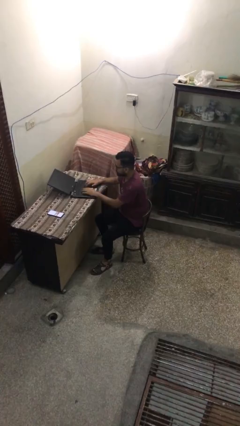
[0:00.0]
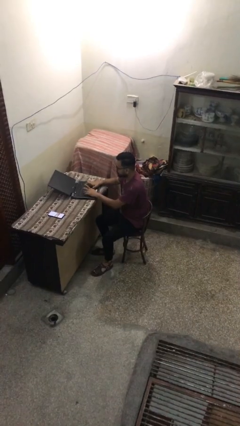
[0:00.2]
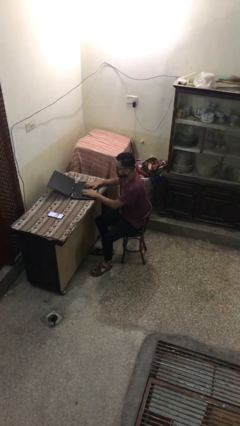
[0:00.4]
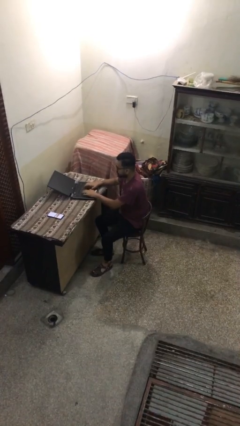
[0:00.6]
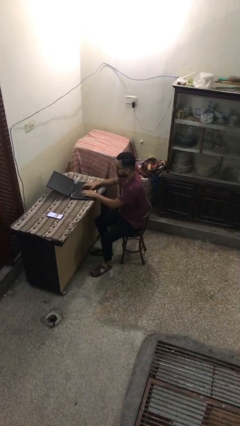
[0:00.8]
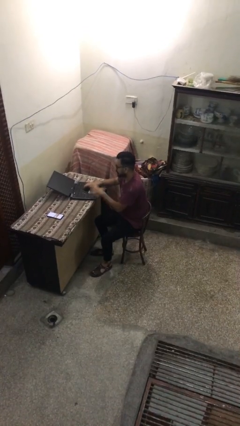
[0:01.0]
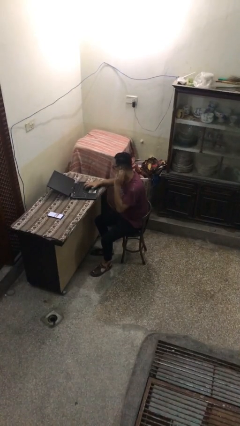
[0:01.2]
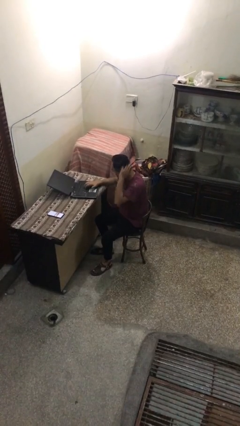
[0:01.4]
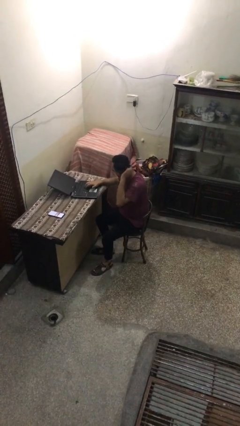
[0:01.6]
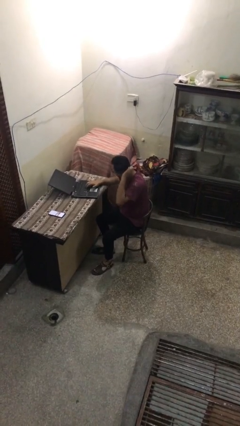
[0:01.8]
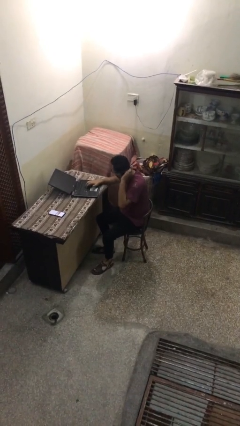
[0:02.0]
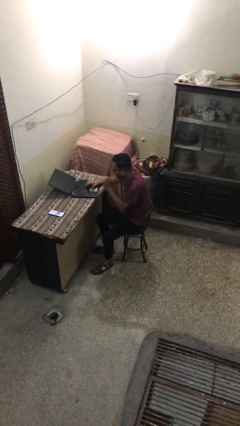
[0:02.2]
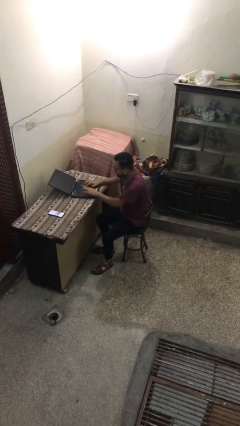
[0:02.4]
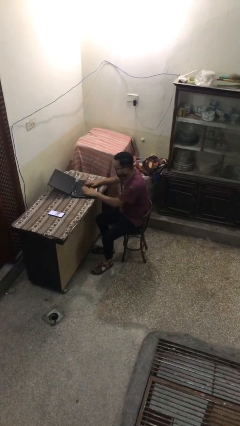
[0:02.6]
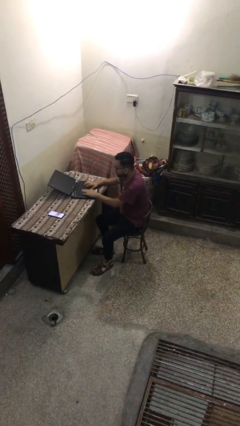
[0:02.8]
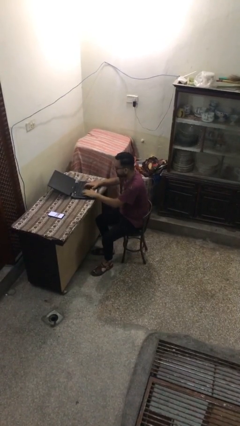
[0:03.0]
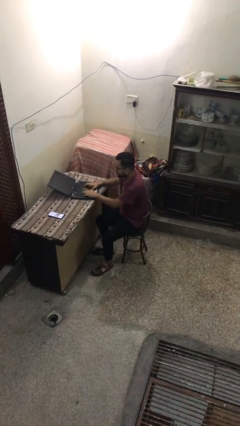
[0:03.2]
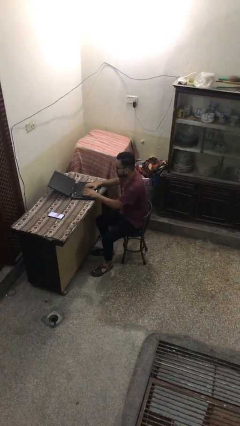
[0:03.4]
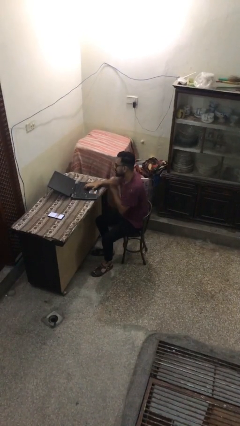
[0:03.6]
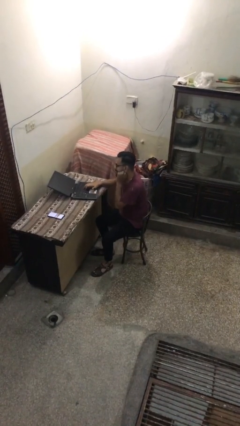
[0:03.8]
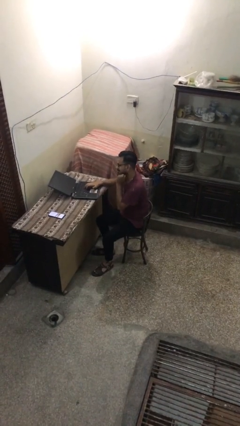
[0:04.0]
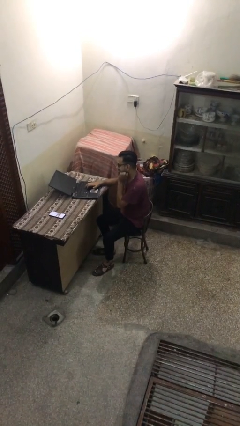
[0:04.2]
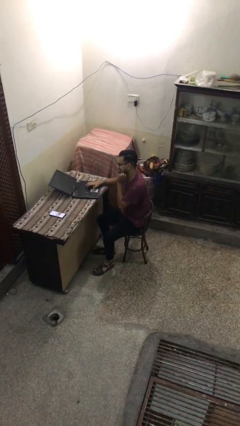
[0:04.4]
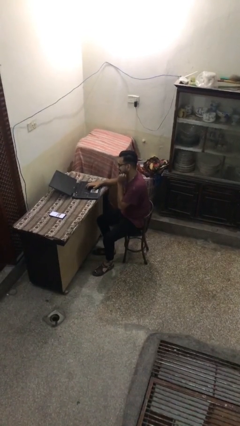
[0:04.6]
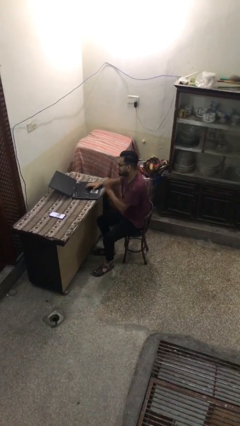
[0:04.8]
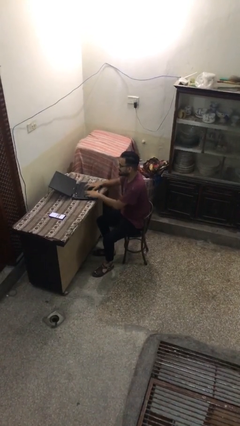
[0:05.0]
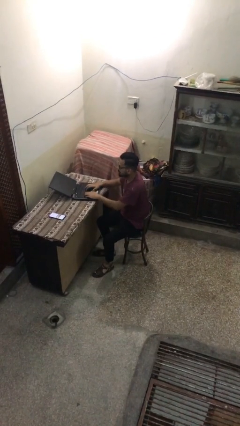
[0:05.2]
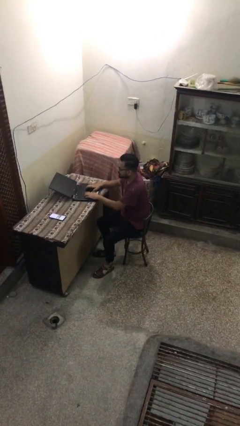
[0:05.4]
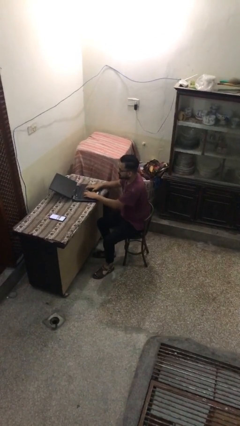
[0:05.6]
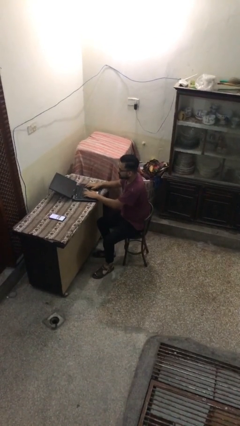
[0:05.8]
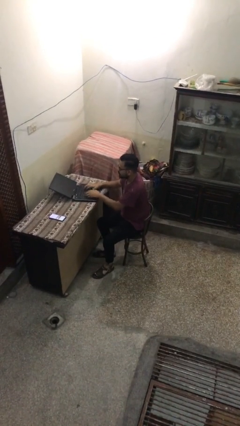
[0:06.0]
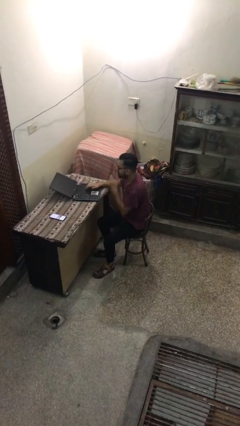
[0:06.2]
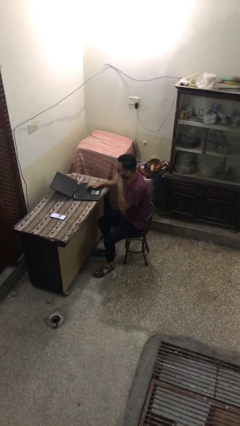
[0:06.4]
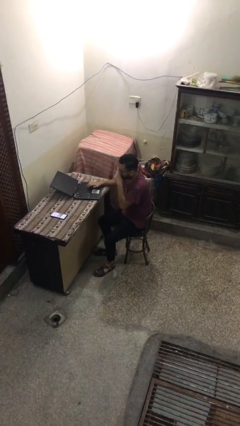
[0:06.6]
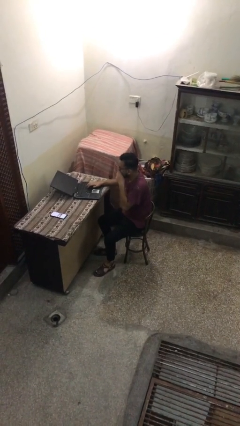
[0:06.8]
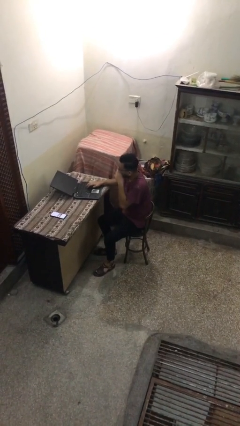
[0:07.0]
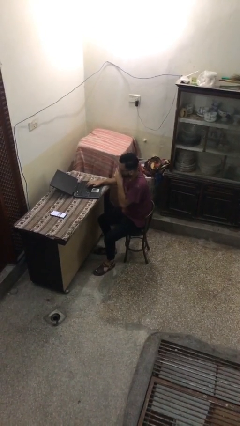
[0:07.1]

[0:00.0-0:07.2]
person interacts with laptop

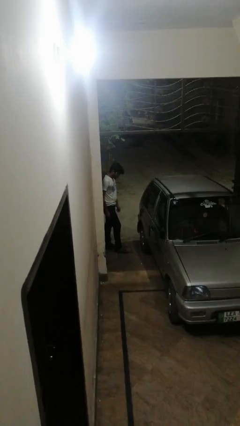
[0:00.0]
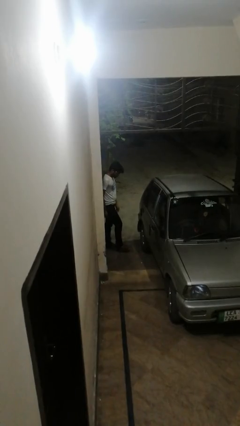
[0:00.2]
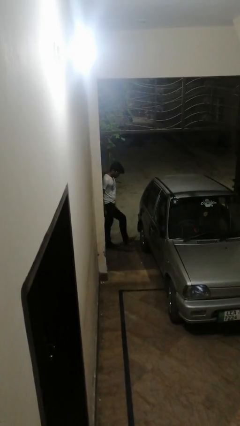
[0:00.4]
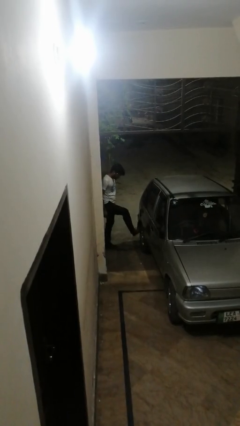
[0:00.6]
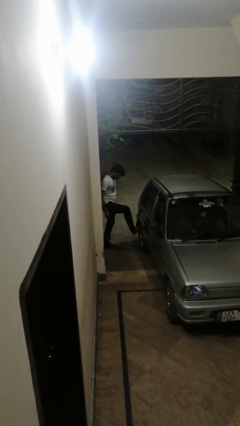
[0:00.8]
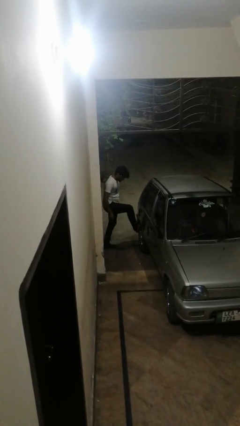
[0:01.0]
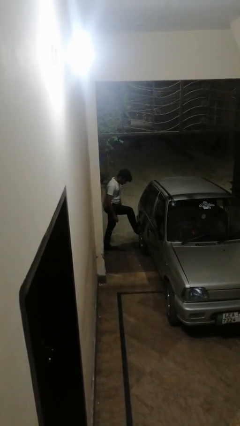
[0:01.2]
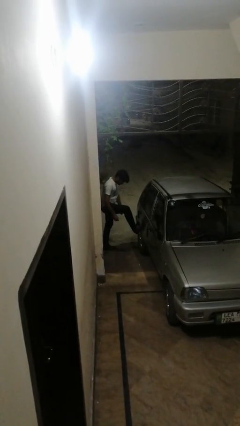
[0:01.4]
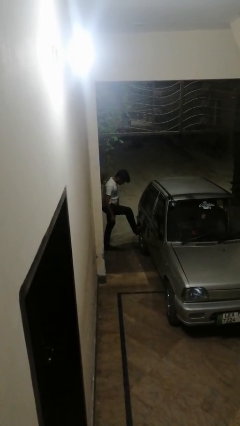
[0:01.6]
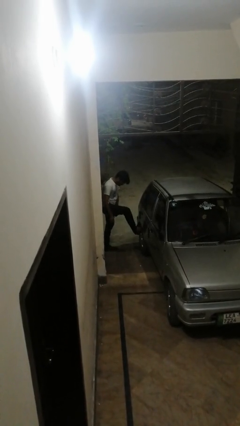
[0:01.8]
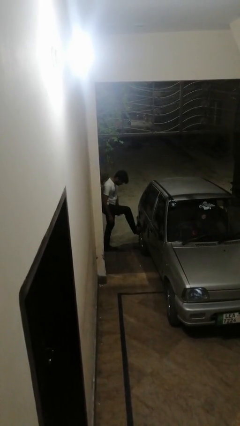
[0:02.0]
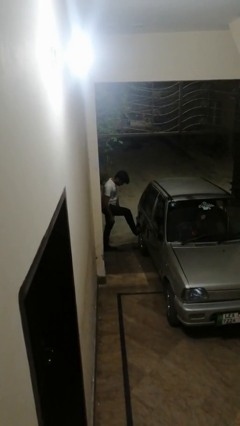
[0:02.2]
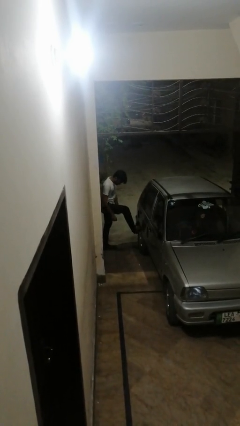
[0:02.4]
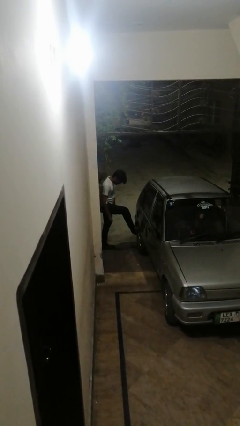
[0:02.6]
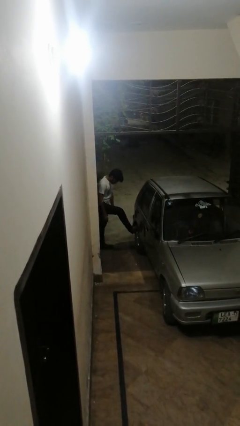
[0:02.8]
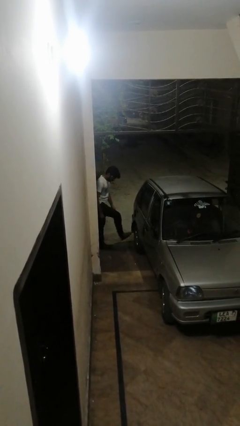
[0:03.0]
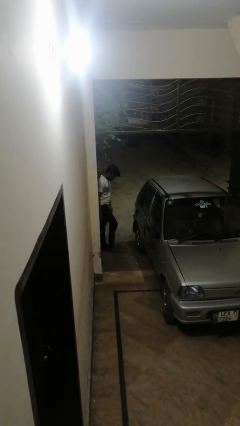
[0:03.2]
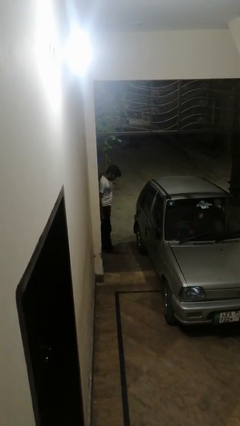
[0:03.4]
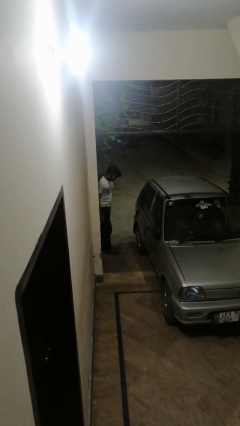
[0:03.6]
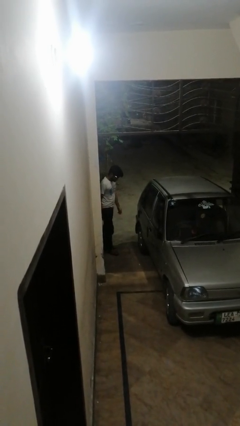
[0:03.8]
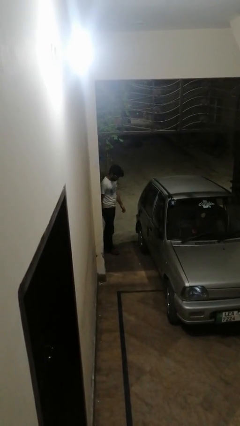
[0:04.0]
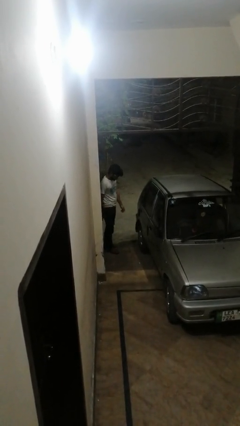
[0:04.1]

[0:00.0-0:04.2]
person kicks car tires

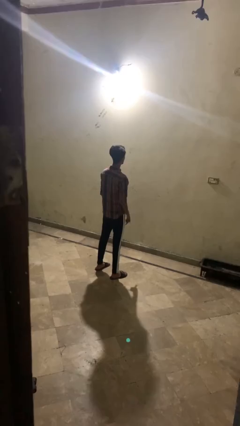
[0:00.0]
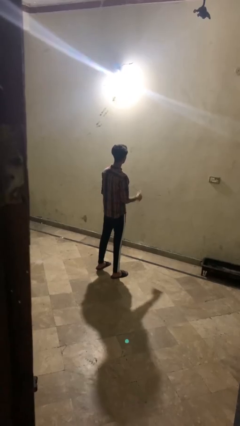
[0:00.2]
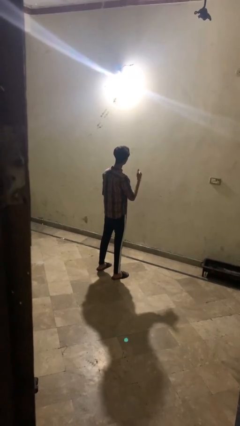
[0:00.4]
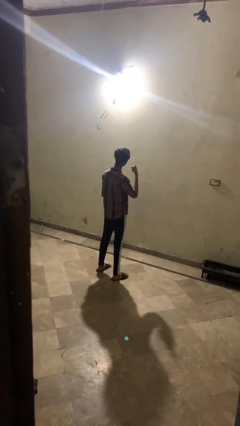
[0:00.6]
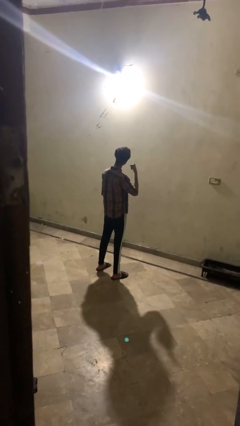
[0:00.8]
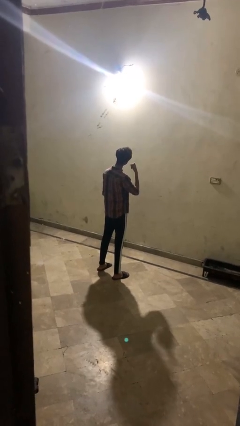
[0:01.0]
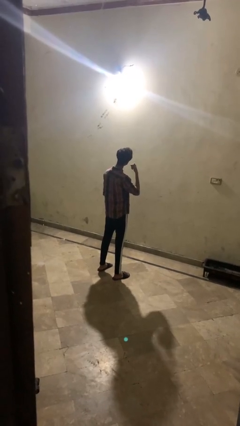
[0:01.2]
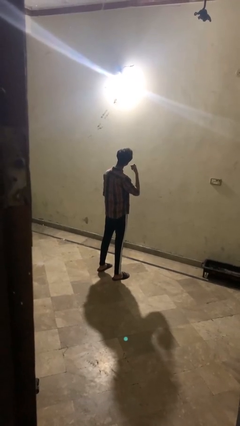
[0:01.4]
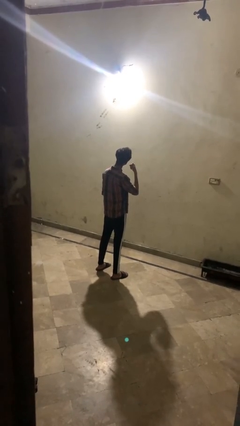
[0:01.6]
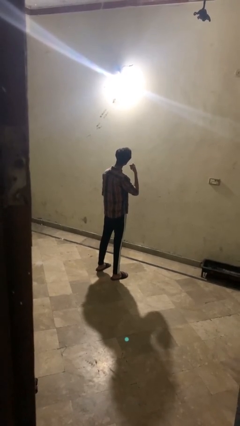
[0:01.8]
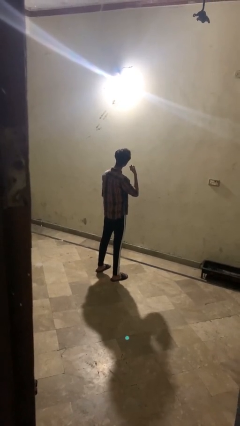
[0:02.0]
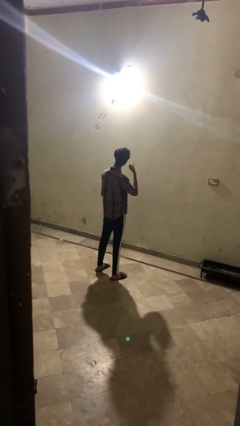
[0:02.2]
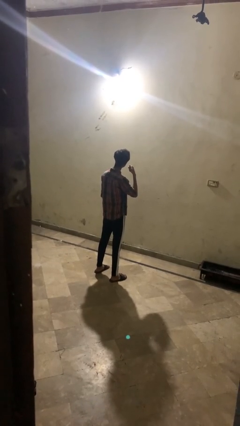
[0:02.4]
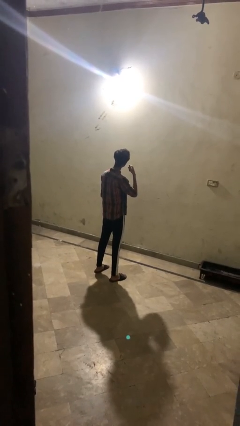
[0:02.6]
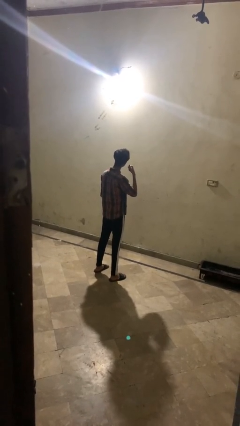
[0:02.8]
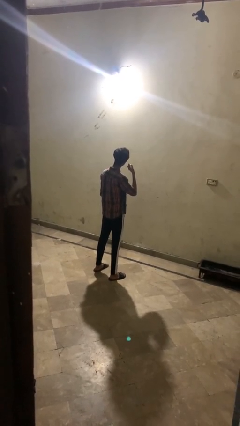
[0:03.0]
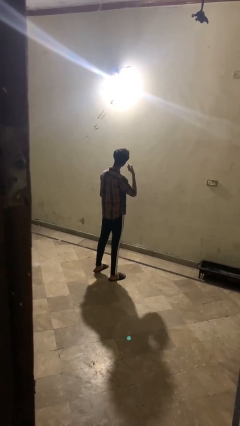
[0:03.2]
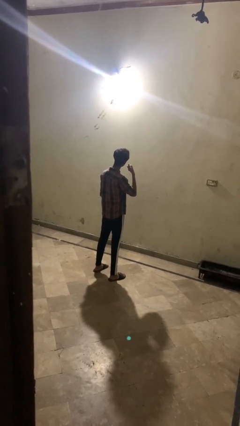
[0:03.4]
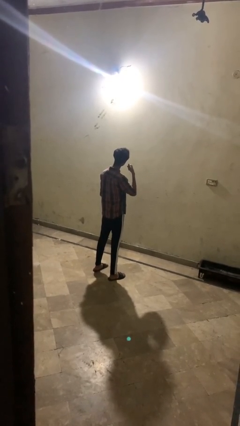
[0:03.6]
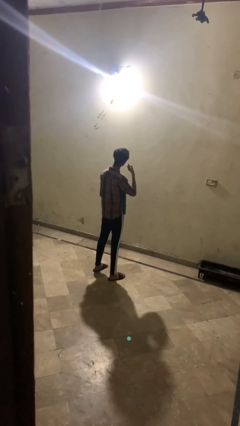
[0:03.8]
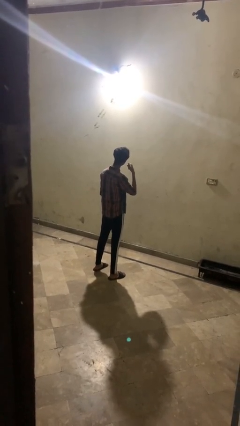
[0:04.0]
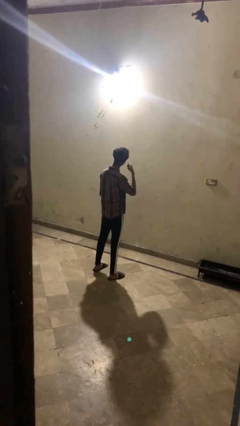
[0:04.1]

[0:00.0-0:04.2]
person gestures call me

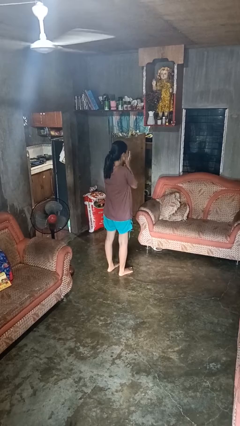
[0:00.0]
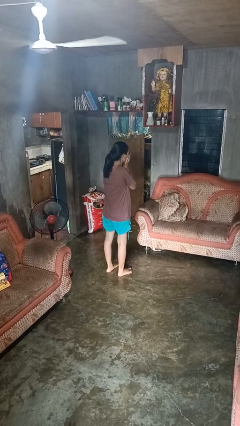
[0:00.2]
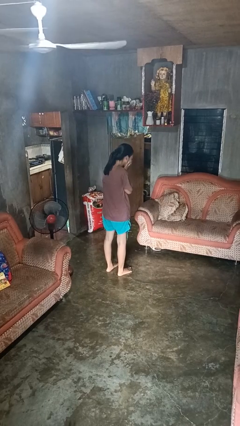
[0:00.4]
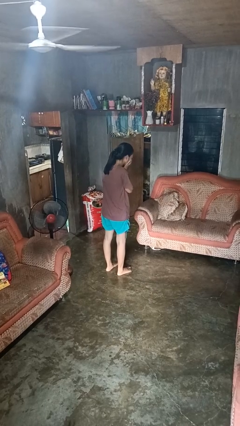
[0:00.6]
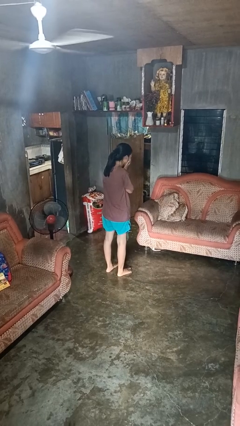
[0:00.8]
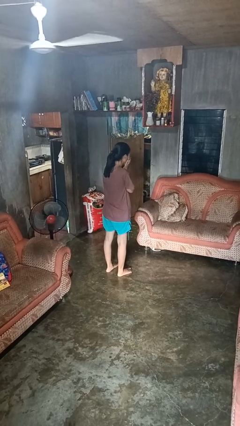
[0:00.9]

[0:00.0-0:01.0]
person sneezes into hand

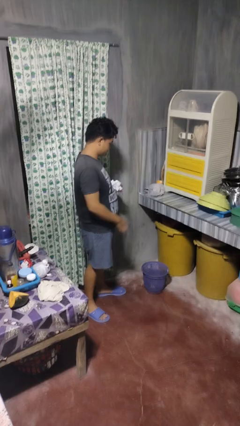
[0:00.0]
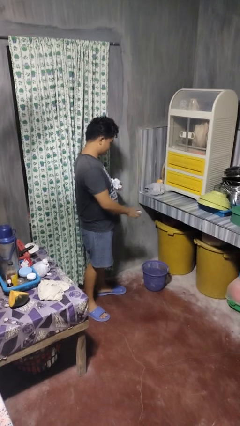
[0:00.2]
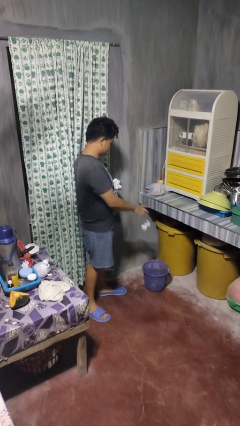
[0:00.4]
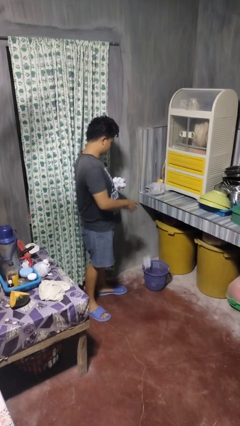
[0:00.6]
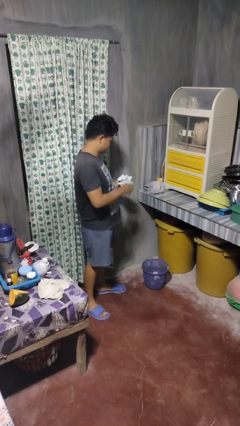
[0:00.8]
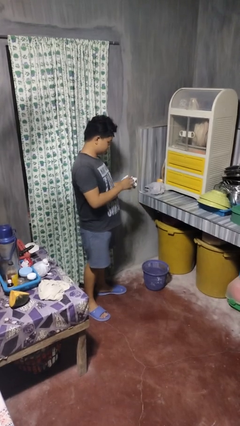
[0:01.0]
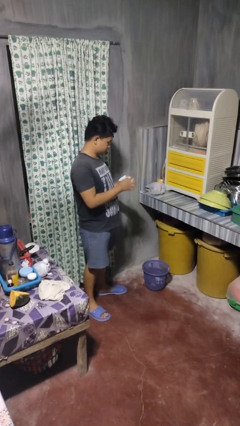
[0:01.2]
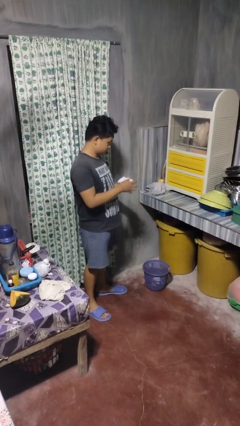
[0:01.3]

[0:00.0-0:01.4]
person discards trash
